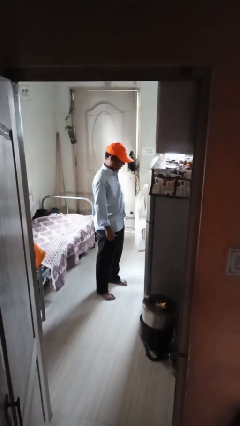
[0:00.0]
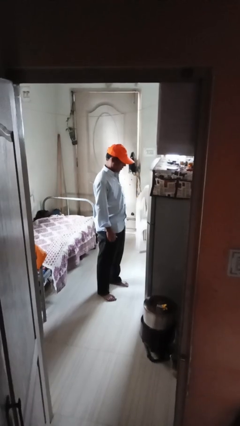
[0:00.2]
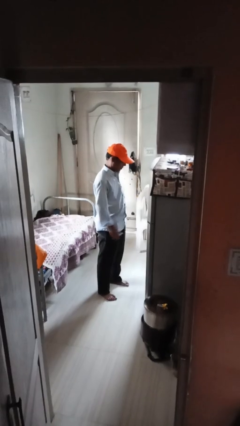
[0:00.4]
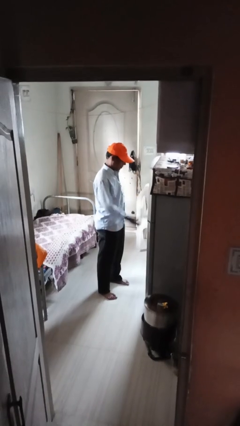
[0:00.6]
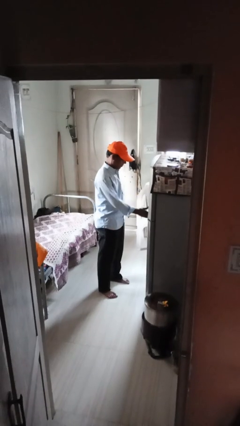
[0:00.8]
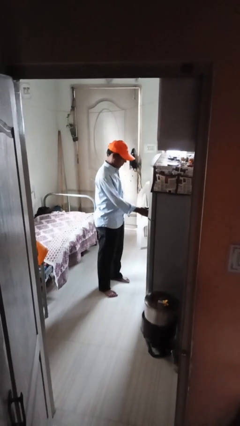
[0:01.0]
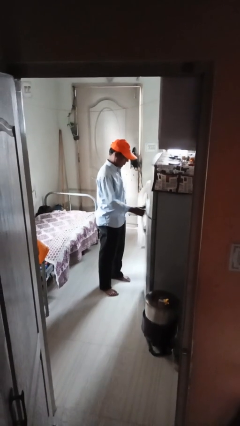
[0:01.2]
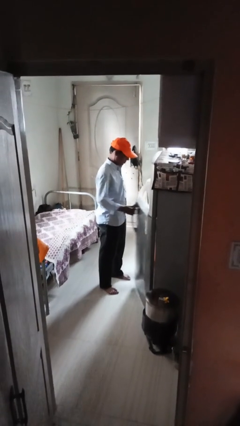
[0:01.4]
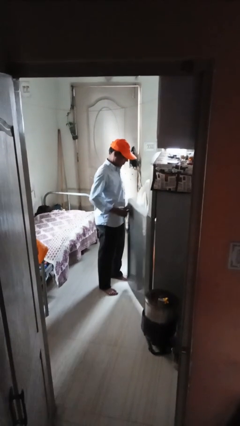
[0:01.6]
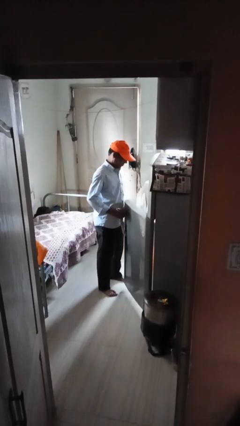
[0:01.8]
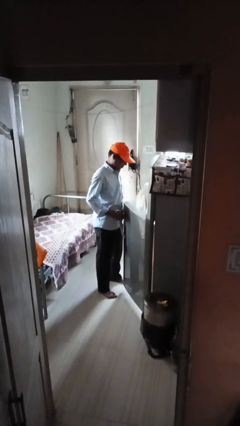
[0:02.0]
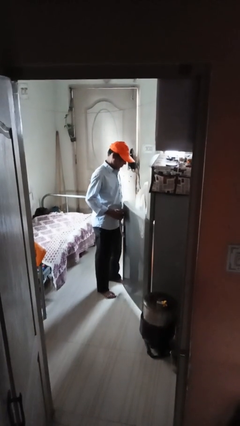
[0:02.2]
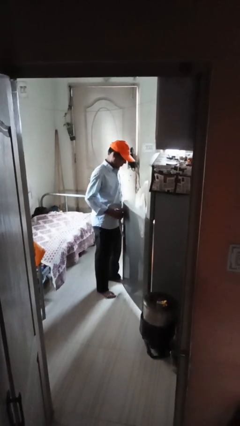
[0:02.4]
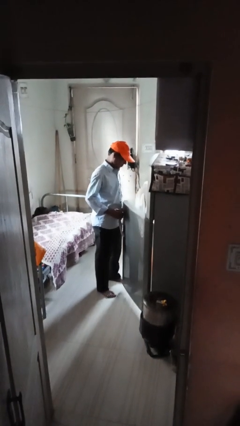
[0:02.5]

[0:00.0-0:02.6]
person opens refrigerator

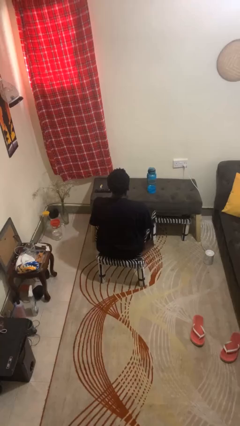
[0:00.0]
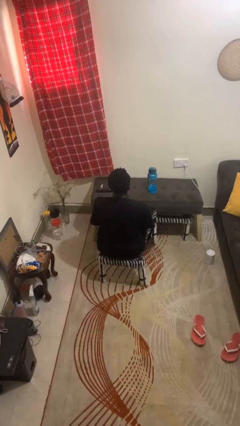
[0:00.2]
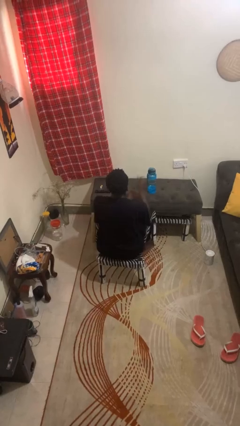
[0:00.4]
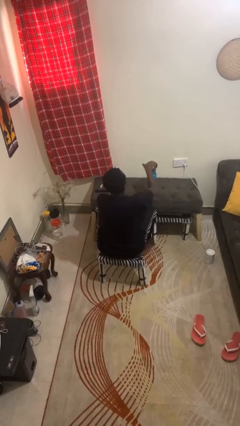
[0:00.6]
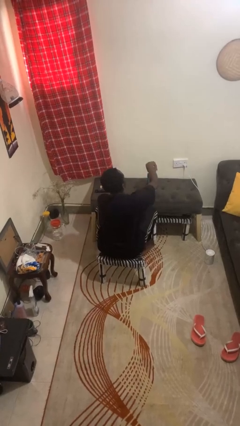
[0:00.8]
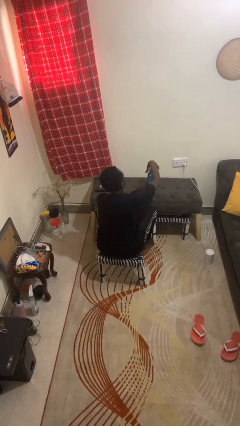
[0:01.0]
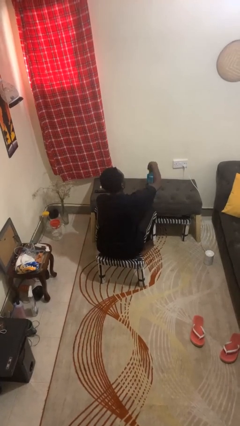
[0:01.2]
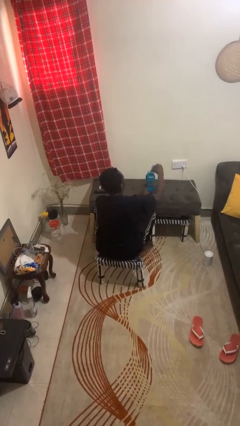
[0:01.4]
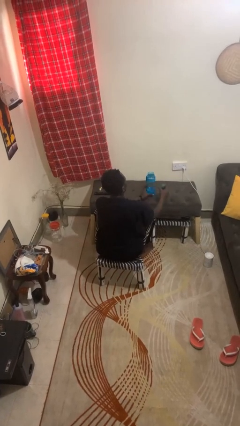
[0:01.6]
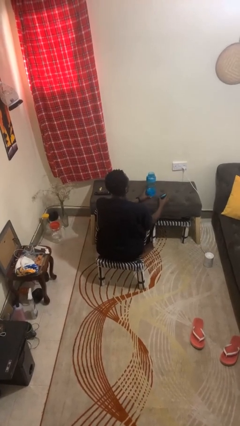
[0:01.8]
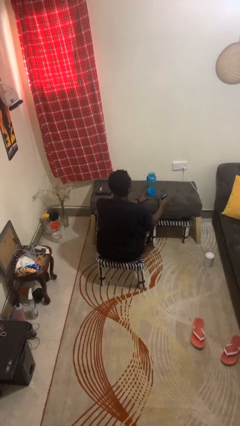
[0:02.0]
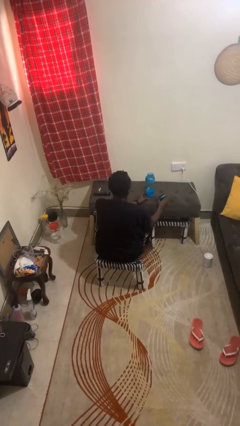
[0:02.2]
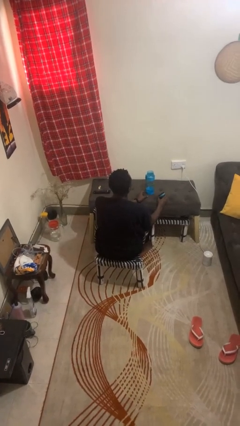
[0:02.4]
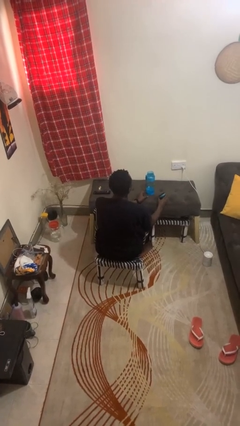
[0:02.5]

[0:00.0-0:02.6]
person opens jar

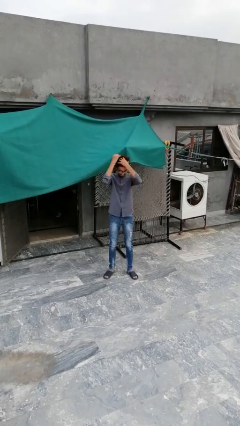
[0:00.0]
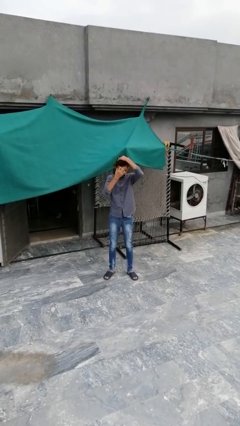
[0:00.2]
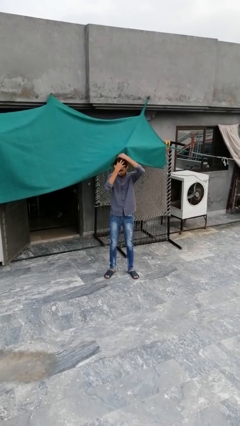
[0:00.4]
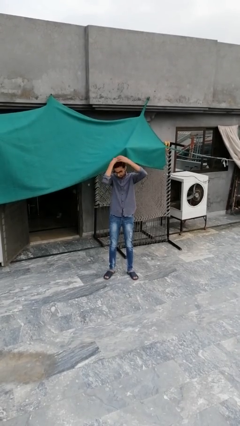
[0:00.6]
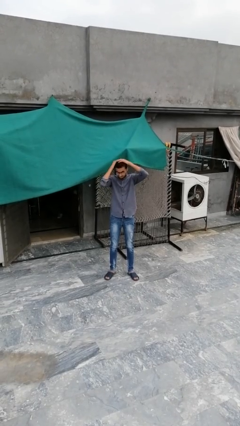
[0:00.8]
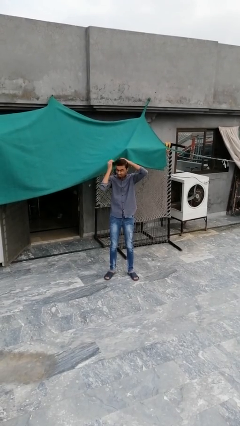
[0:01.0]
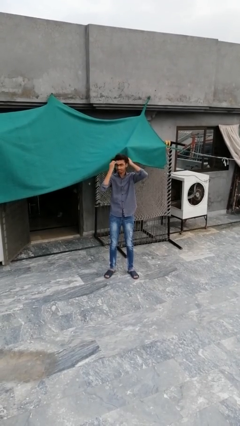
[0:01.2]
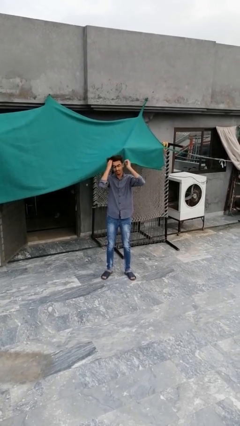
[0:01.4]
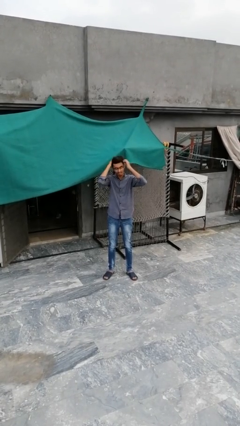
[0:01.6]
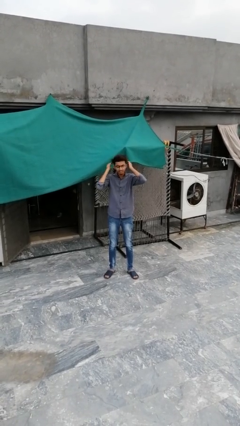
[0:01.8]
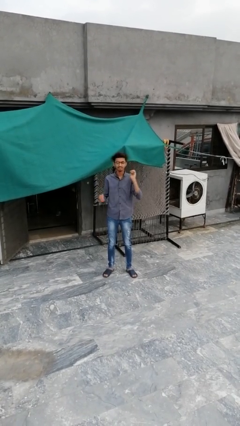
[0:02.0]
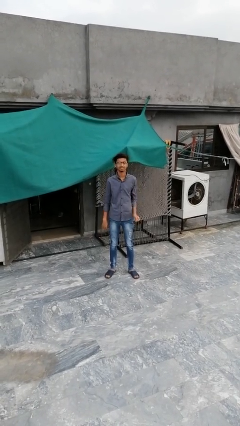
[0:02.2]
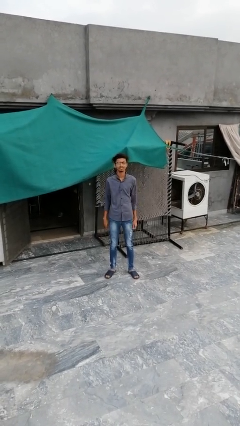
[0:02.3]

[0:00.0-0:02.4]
person strokes hair

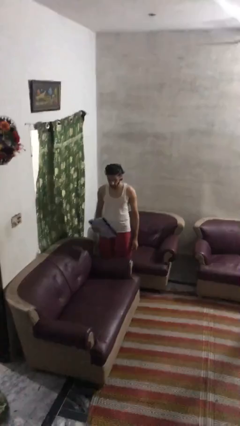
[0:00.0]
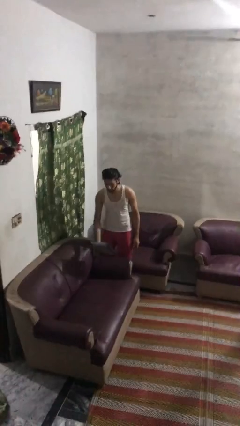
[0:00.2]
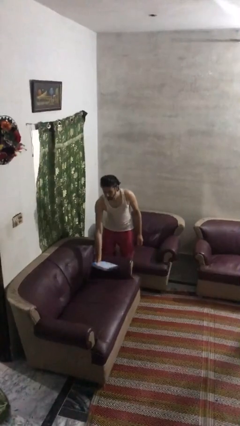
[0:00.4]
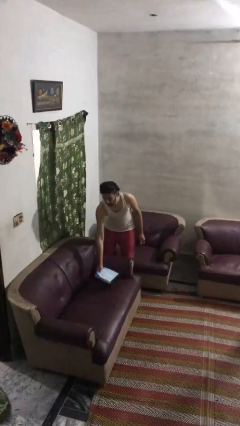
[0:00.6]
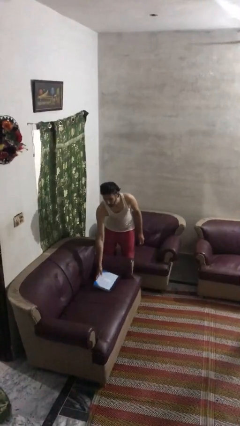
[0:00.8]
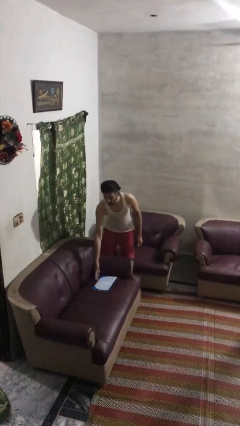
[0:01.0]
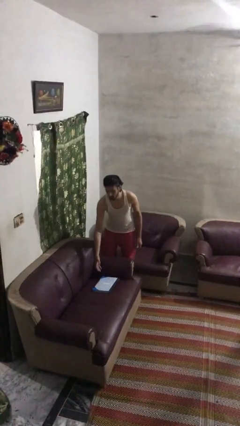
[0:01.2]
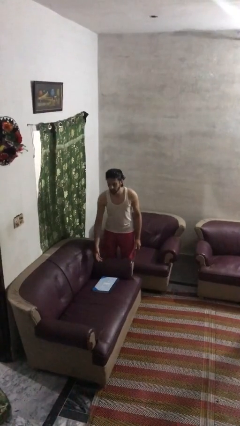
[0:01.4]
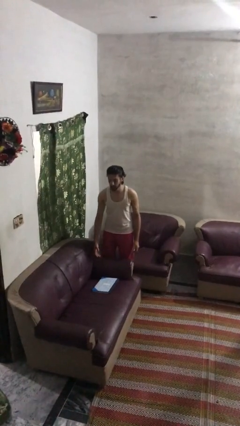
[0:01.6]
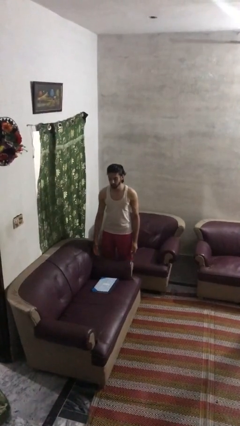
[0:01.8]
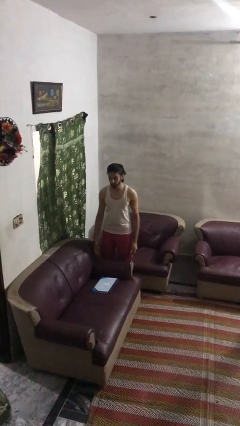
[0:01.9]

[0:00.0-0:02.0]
person puts down object on couch

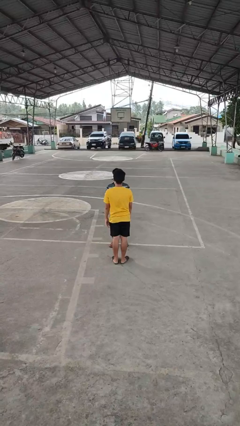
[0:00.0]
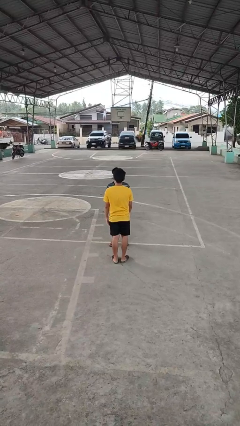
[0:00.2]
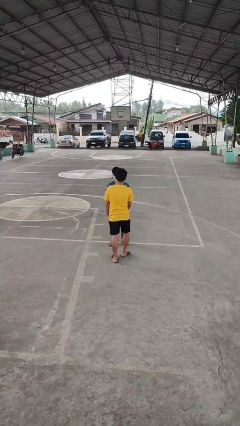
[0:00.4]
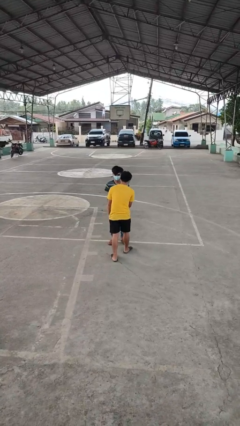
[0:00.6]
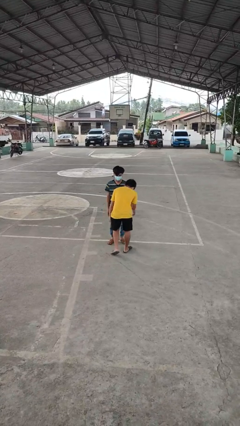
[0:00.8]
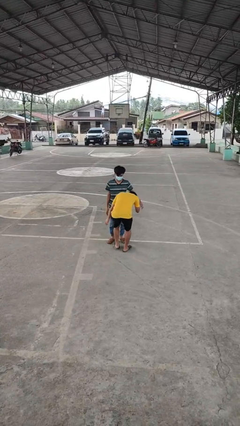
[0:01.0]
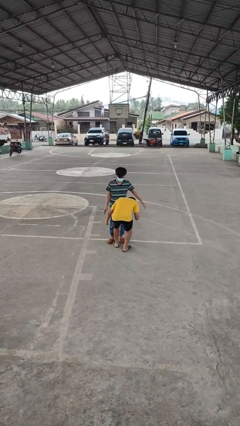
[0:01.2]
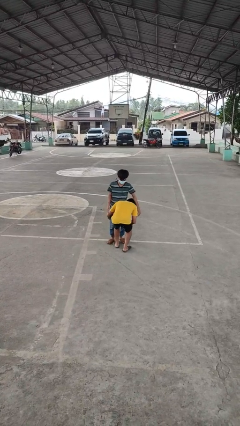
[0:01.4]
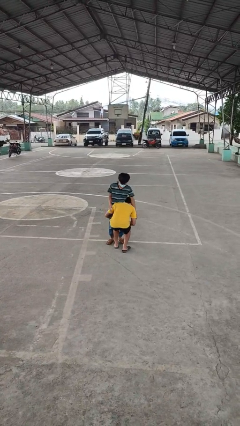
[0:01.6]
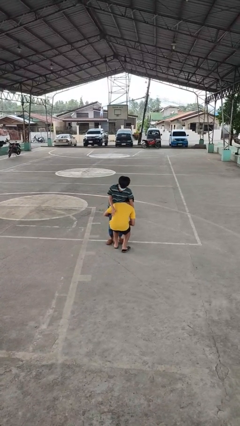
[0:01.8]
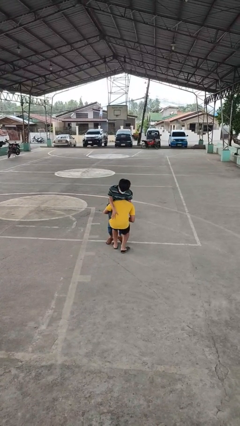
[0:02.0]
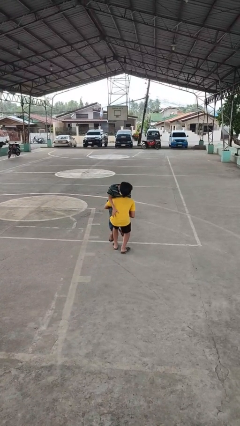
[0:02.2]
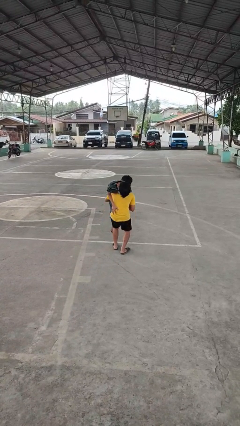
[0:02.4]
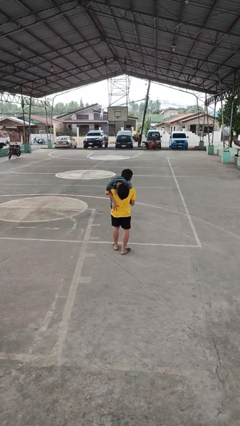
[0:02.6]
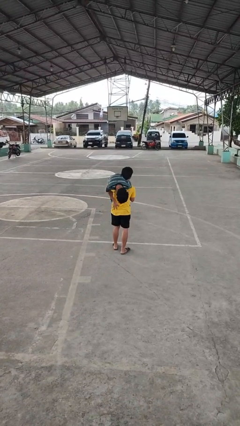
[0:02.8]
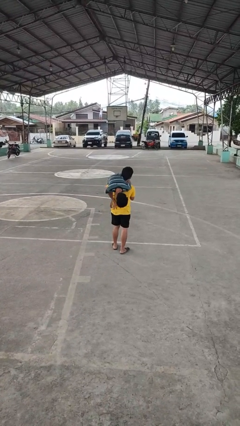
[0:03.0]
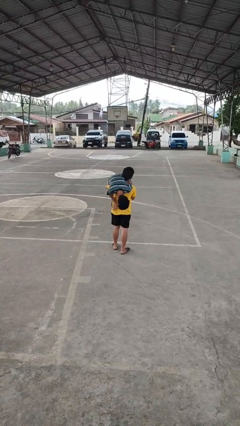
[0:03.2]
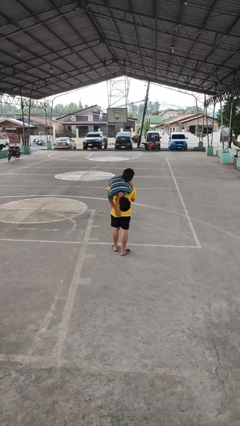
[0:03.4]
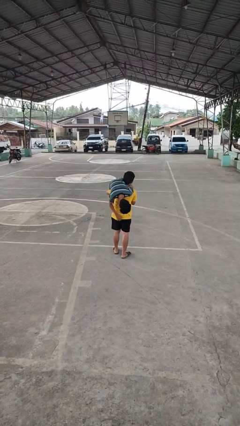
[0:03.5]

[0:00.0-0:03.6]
person carries person over shoulder

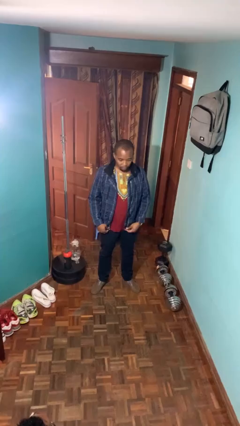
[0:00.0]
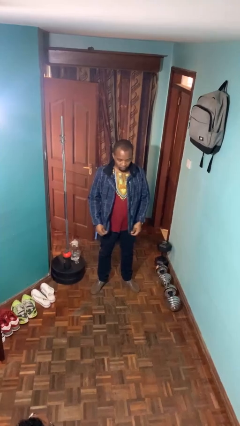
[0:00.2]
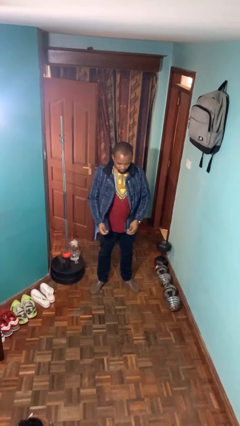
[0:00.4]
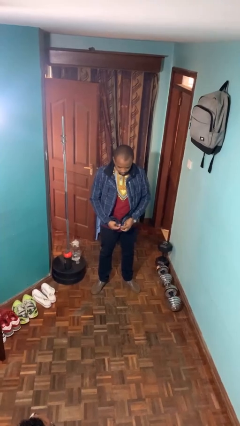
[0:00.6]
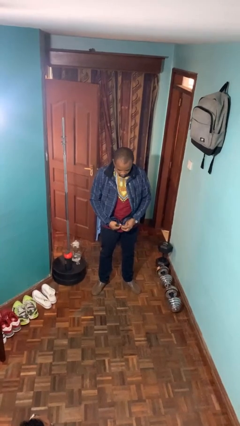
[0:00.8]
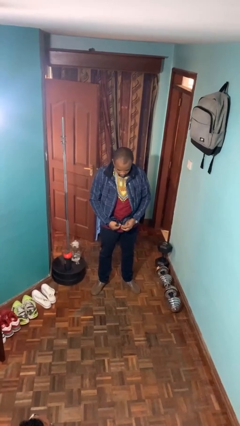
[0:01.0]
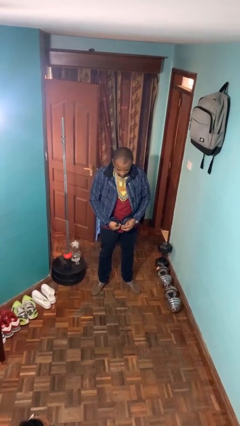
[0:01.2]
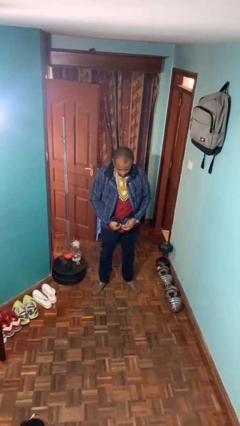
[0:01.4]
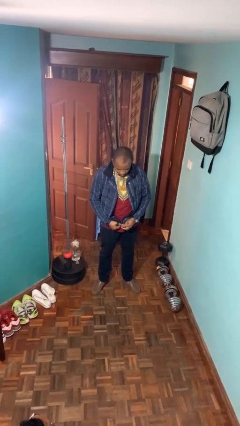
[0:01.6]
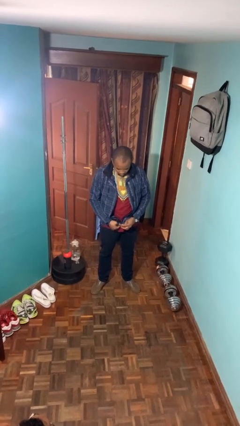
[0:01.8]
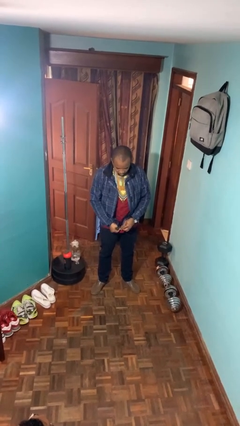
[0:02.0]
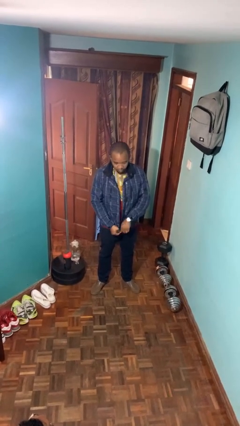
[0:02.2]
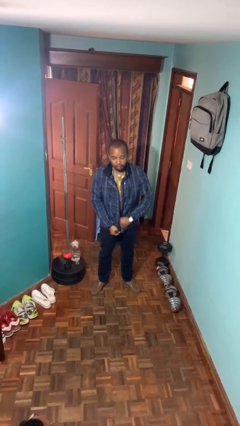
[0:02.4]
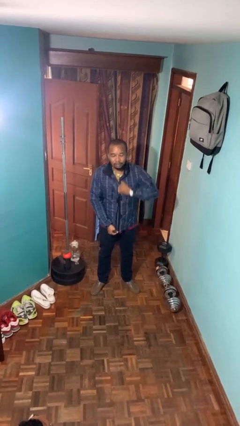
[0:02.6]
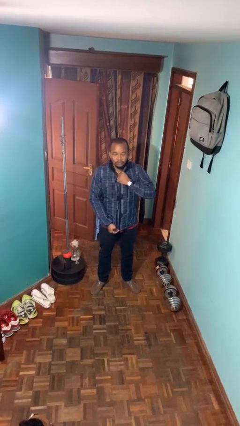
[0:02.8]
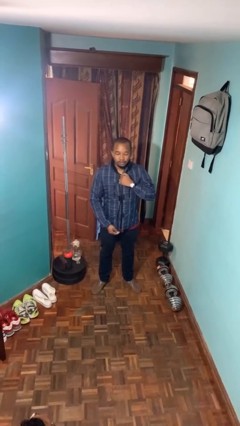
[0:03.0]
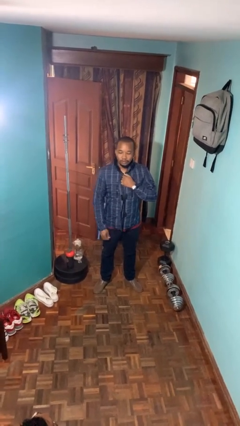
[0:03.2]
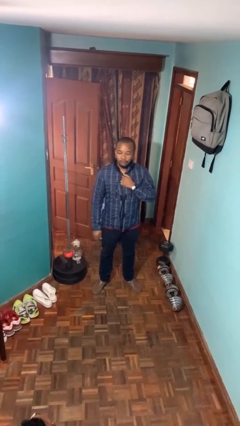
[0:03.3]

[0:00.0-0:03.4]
person zips up jacket

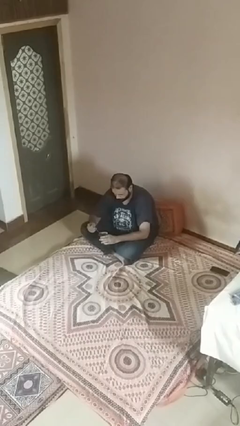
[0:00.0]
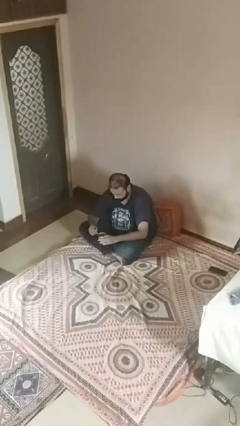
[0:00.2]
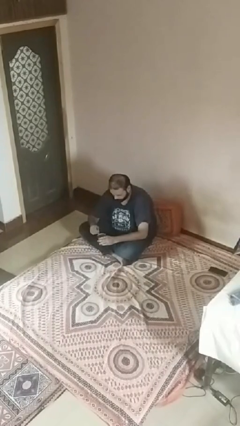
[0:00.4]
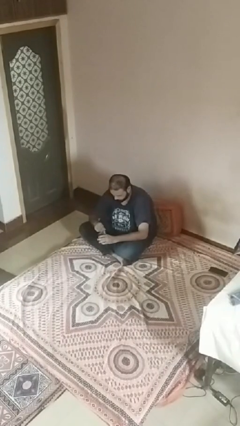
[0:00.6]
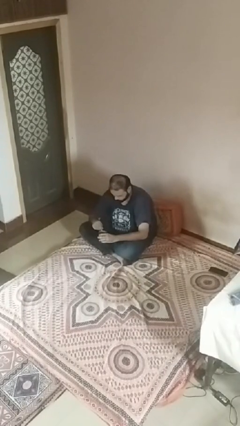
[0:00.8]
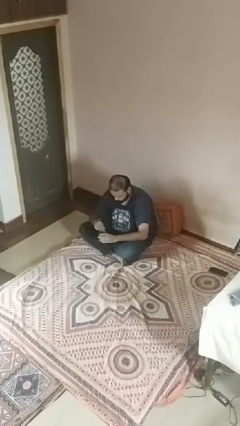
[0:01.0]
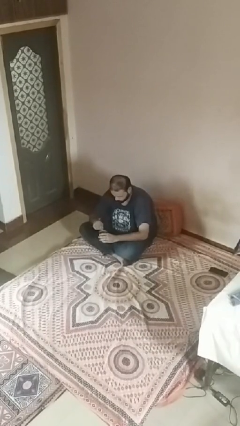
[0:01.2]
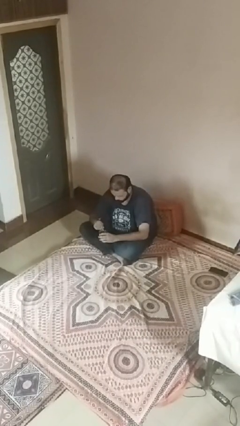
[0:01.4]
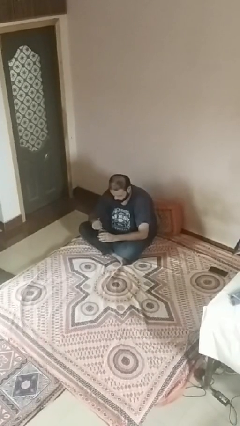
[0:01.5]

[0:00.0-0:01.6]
person stirs mug
